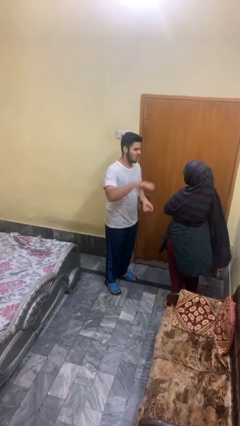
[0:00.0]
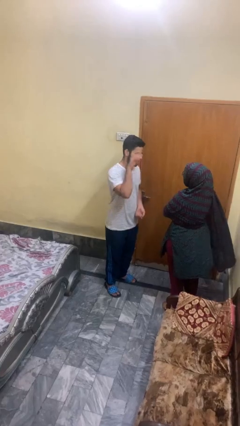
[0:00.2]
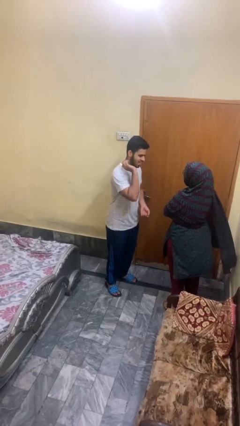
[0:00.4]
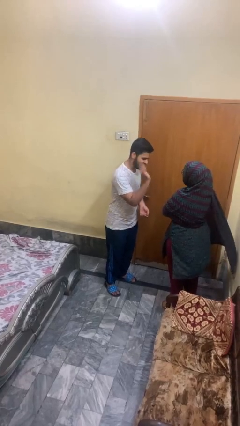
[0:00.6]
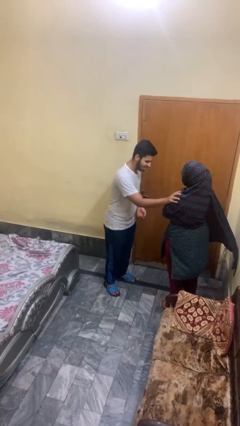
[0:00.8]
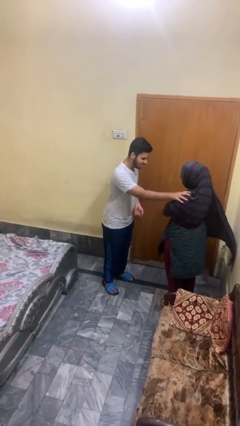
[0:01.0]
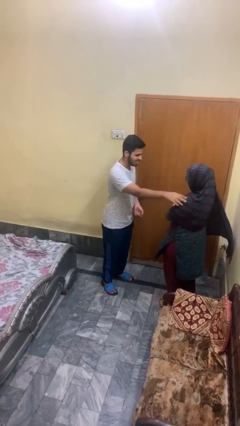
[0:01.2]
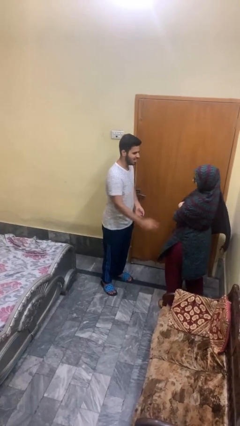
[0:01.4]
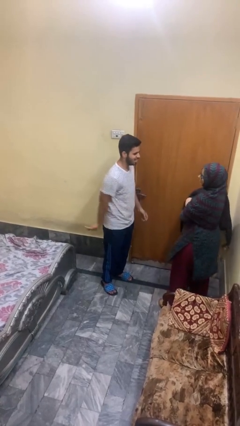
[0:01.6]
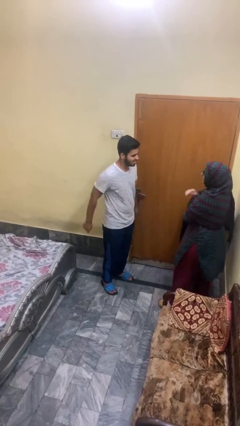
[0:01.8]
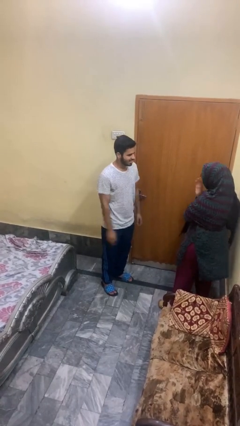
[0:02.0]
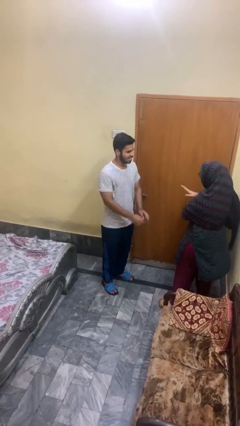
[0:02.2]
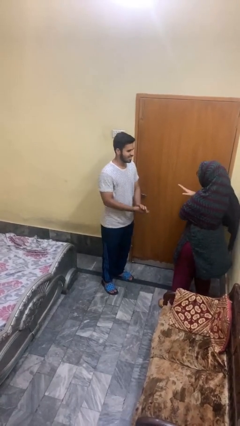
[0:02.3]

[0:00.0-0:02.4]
person shoves person

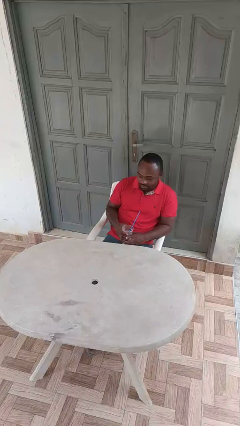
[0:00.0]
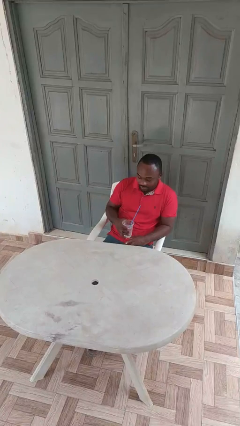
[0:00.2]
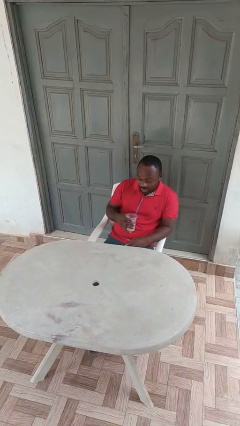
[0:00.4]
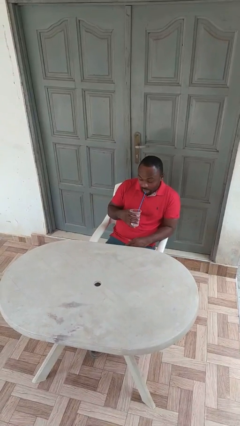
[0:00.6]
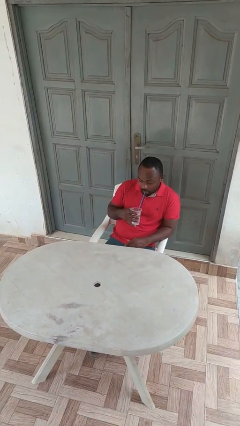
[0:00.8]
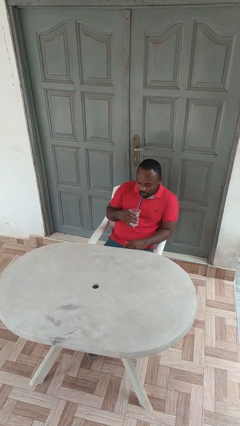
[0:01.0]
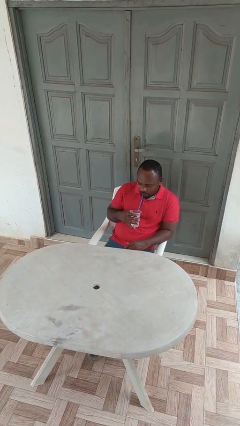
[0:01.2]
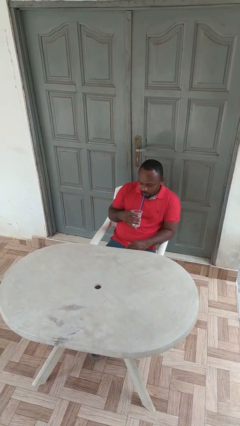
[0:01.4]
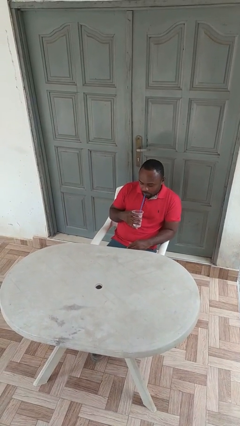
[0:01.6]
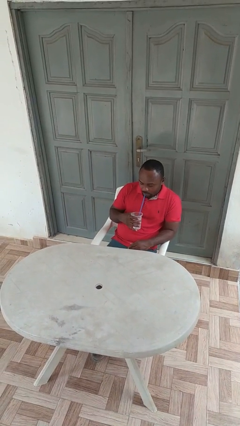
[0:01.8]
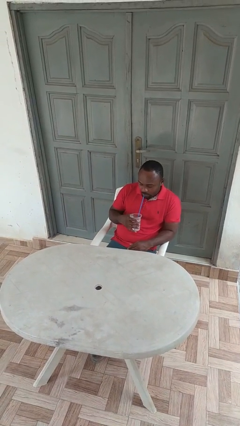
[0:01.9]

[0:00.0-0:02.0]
person drinks from straw

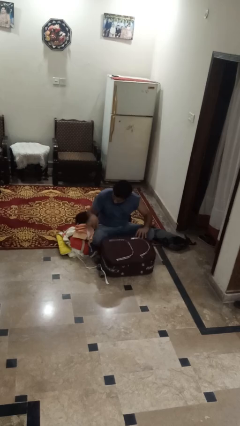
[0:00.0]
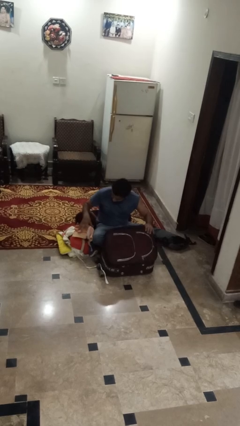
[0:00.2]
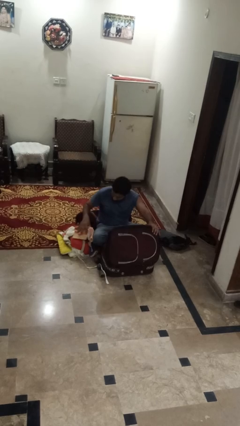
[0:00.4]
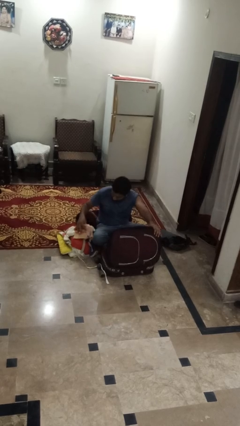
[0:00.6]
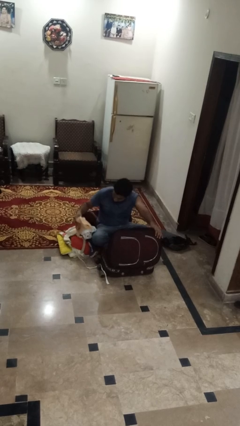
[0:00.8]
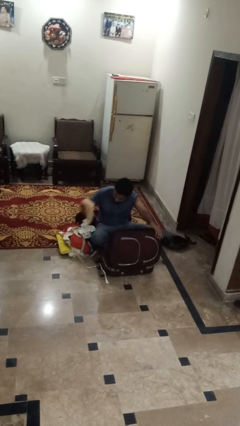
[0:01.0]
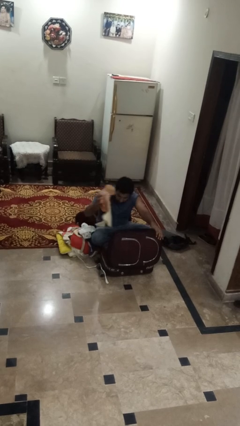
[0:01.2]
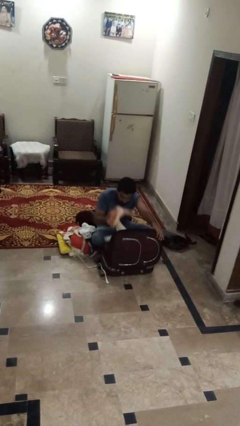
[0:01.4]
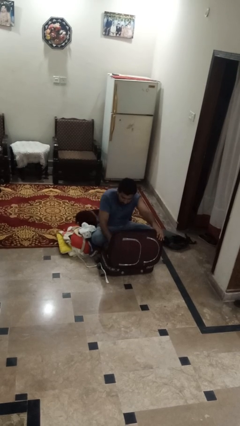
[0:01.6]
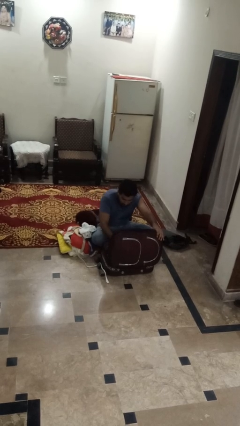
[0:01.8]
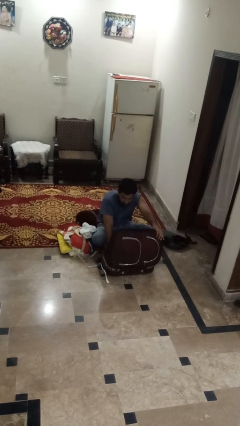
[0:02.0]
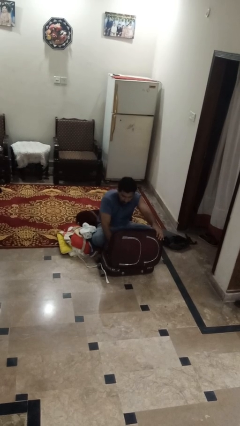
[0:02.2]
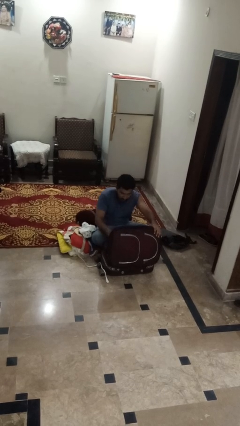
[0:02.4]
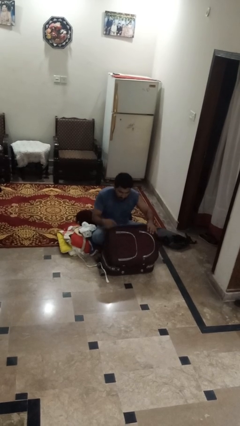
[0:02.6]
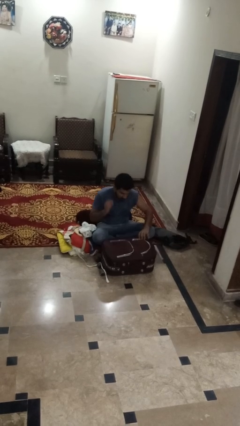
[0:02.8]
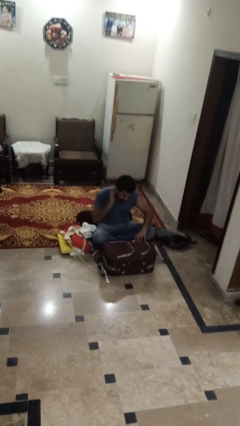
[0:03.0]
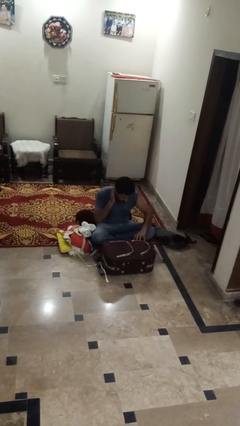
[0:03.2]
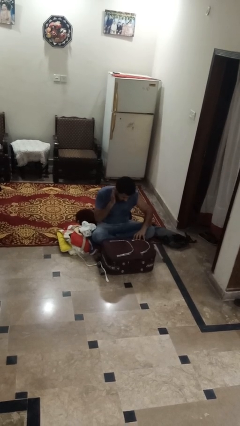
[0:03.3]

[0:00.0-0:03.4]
person loads clothes into suitcase

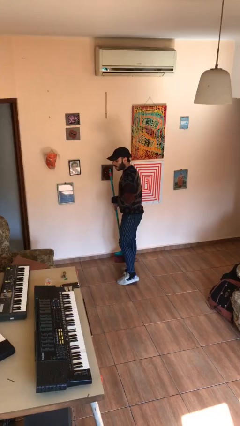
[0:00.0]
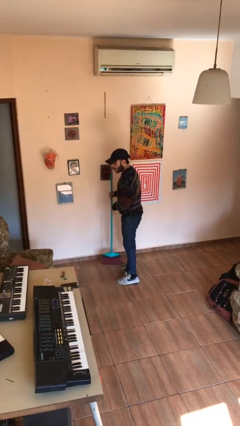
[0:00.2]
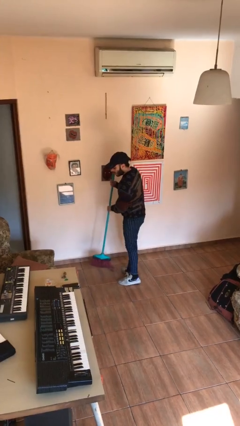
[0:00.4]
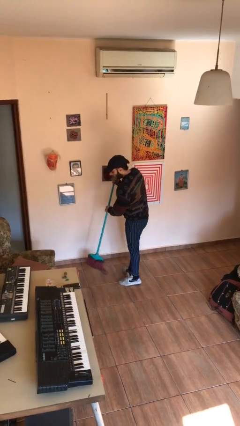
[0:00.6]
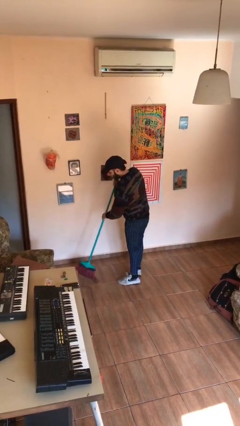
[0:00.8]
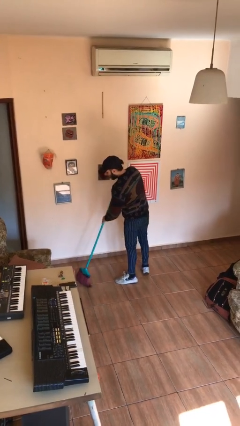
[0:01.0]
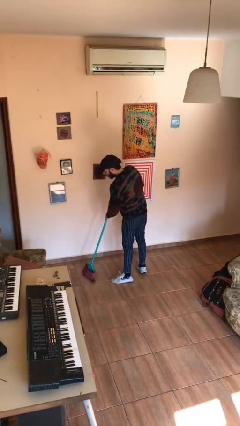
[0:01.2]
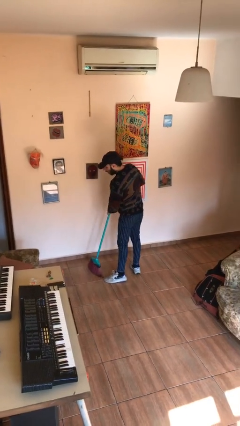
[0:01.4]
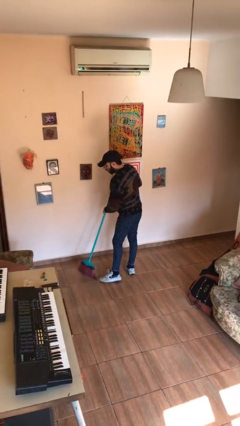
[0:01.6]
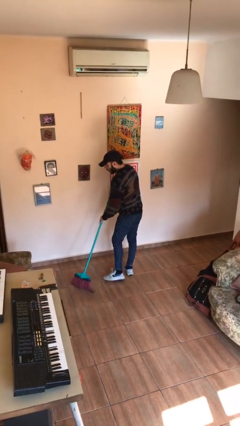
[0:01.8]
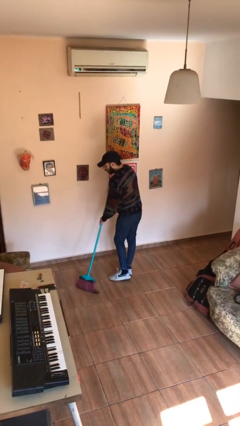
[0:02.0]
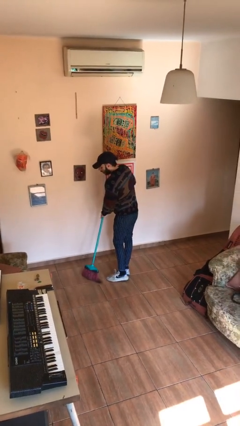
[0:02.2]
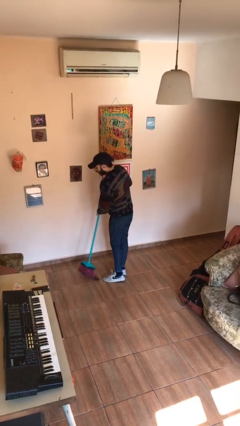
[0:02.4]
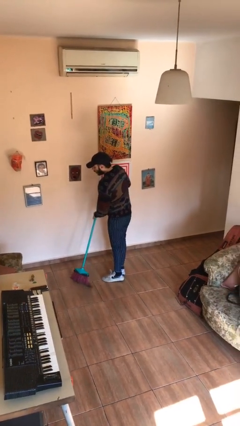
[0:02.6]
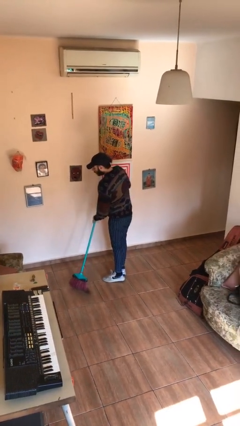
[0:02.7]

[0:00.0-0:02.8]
person sweeps floor

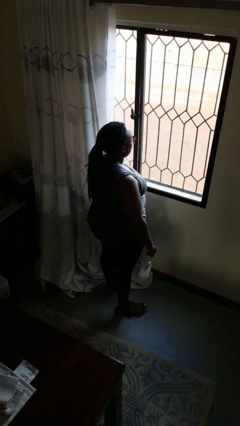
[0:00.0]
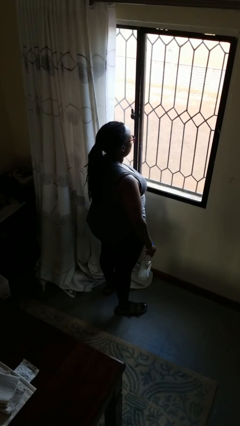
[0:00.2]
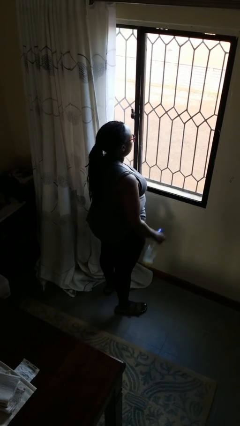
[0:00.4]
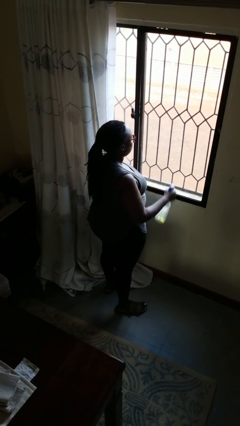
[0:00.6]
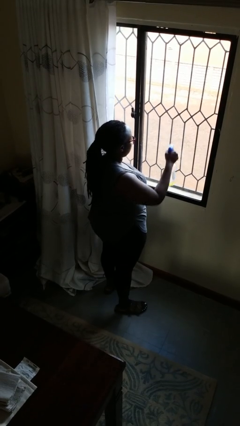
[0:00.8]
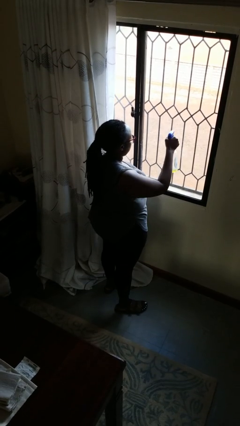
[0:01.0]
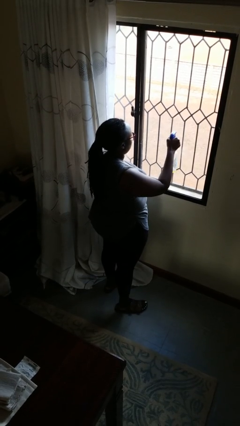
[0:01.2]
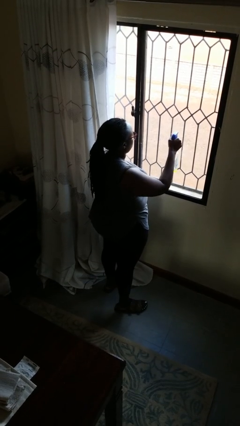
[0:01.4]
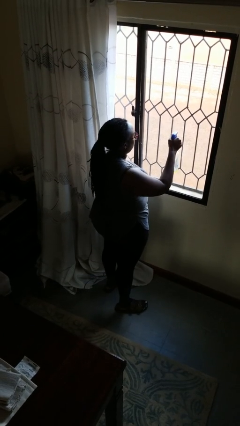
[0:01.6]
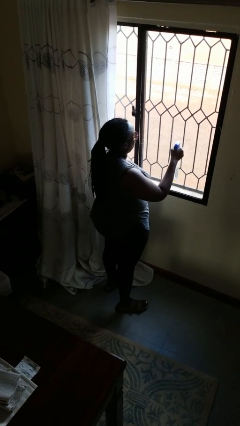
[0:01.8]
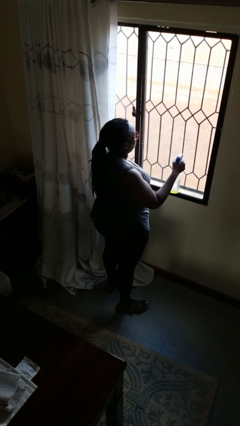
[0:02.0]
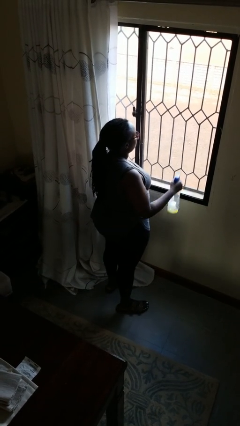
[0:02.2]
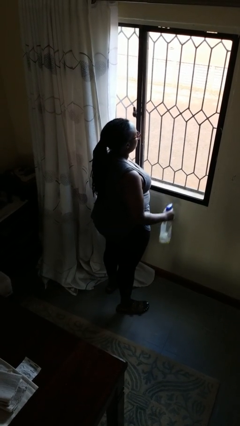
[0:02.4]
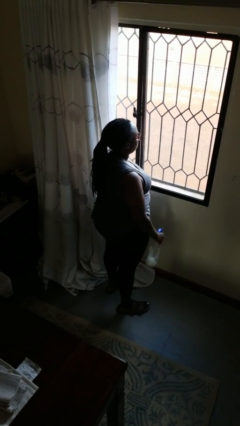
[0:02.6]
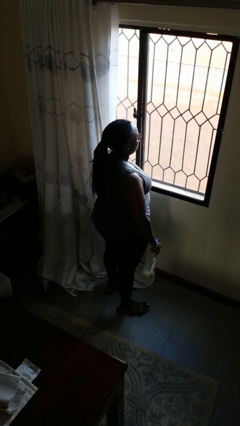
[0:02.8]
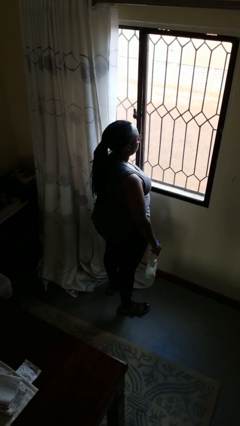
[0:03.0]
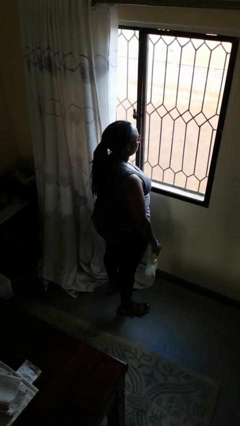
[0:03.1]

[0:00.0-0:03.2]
person sprays from bottle

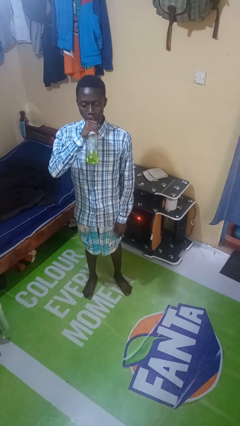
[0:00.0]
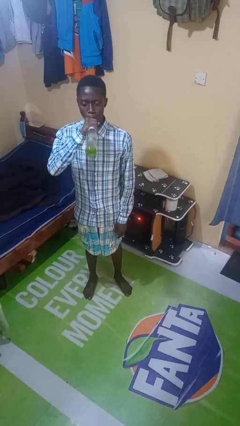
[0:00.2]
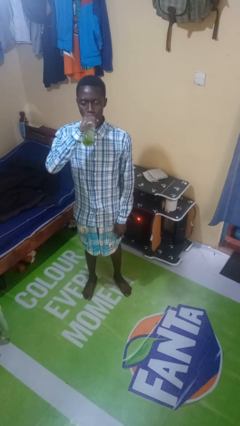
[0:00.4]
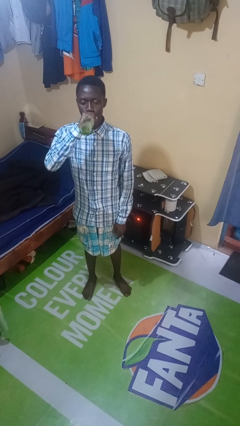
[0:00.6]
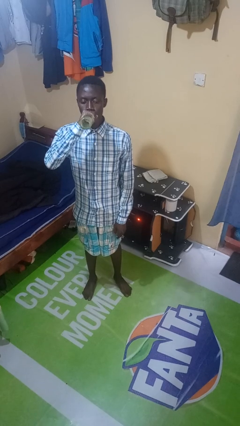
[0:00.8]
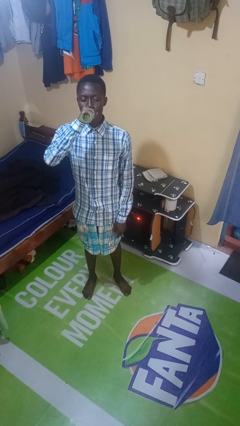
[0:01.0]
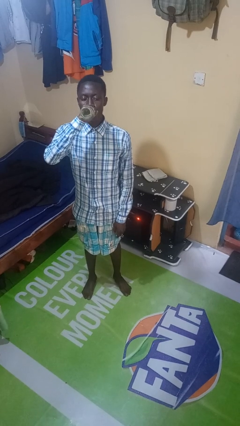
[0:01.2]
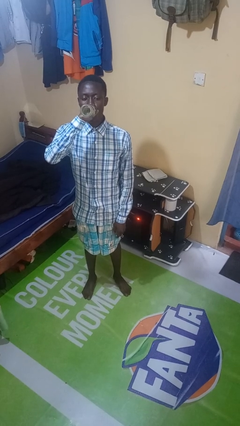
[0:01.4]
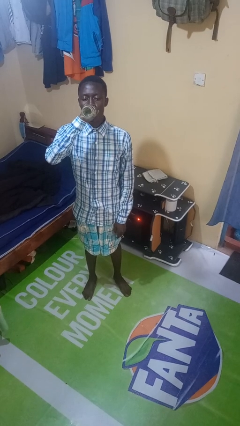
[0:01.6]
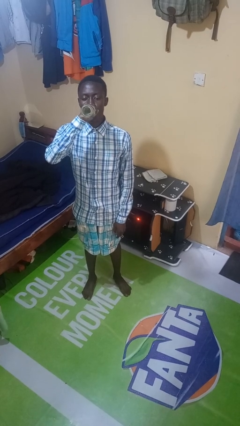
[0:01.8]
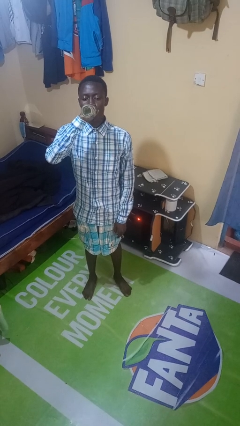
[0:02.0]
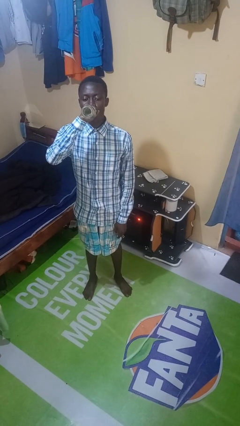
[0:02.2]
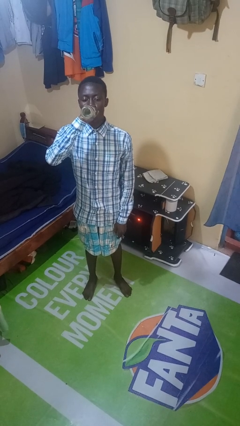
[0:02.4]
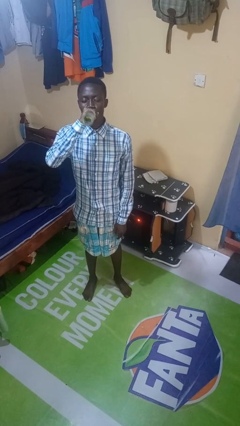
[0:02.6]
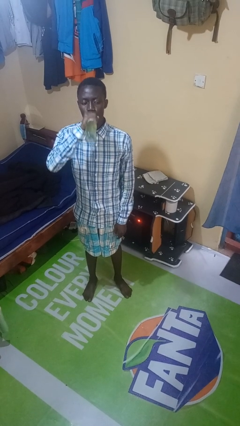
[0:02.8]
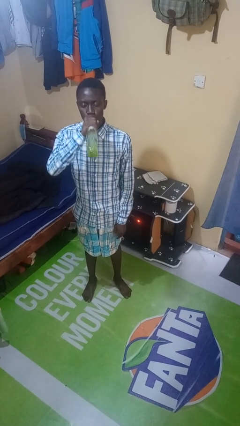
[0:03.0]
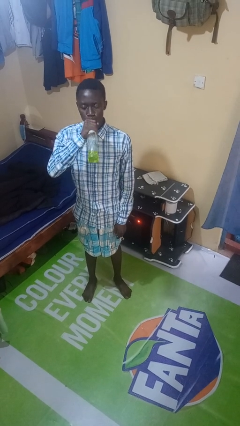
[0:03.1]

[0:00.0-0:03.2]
person drinks from bottle

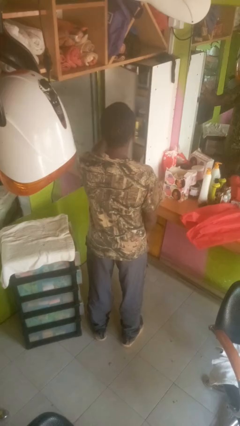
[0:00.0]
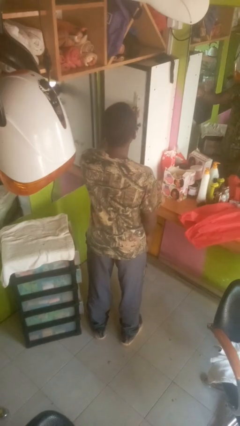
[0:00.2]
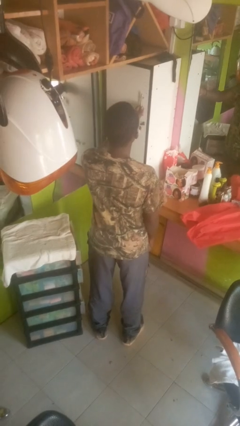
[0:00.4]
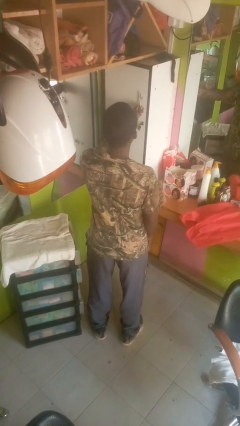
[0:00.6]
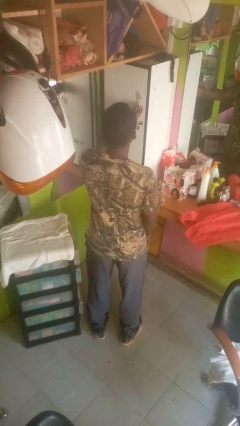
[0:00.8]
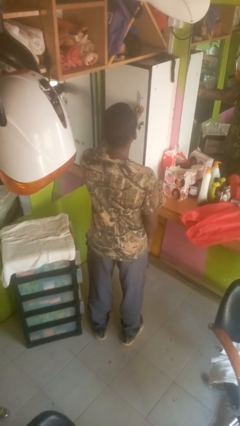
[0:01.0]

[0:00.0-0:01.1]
person closes closet door
